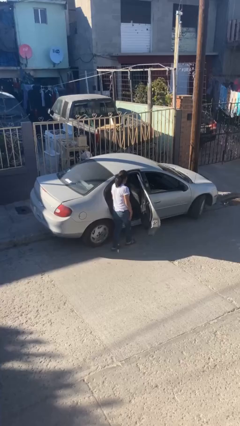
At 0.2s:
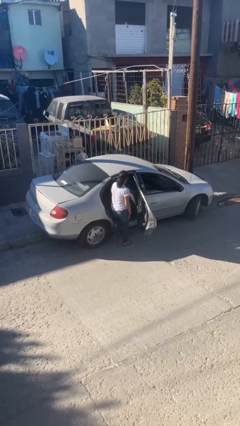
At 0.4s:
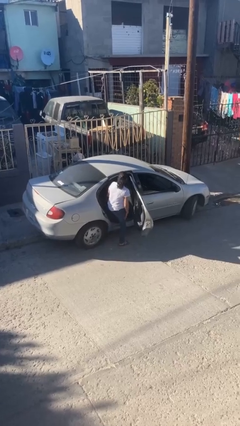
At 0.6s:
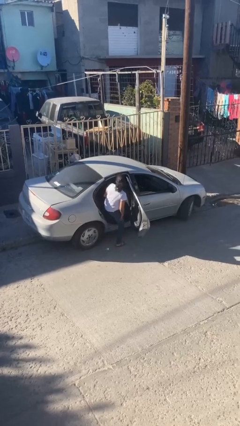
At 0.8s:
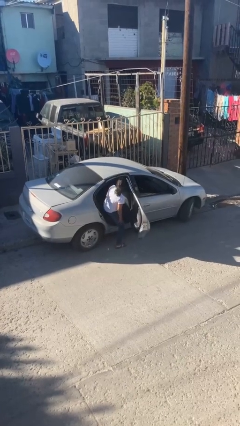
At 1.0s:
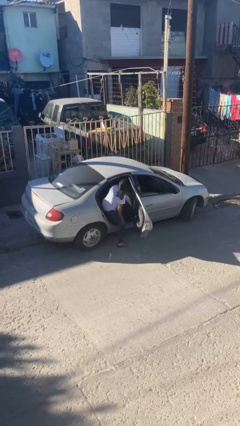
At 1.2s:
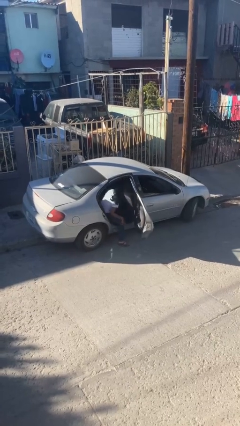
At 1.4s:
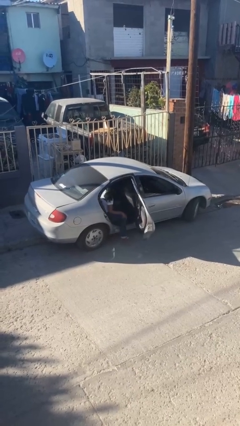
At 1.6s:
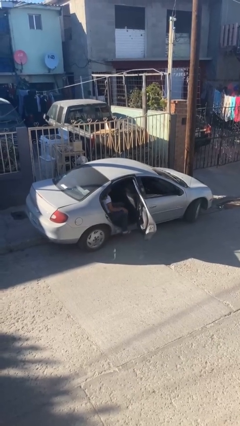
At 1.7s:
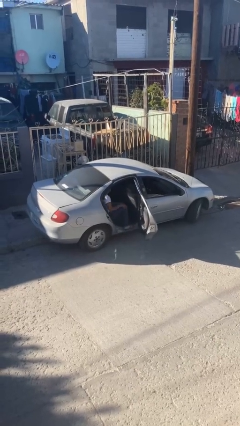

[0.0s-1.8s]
person enters car

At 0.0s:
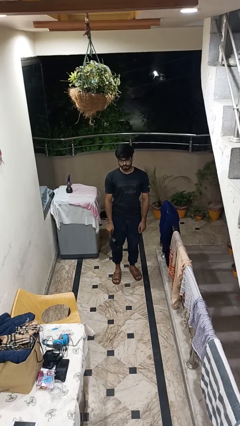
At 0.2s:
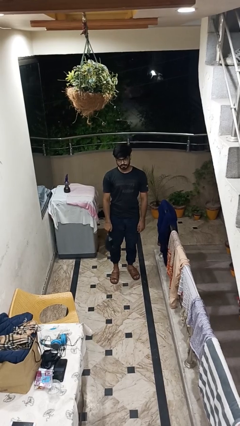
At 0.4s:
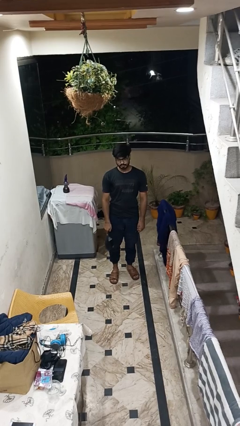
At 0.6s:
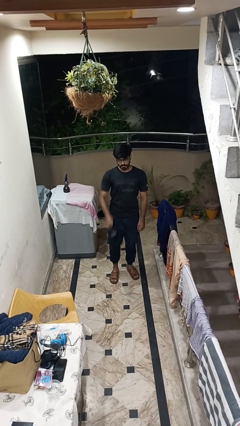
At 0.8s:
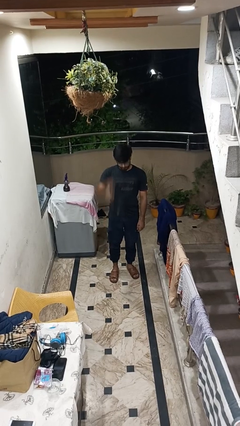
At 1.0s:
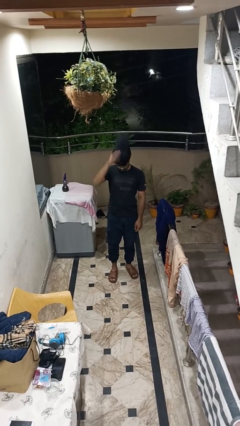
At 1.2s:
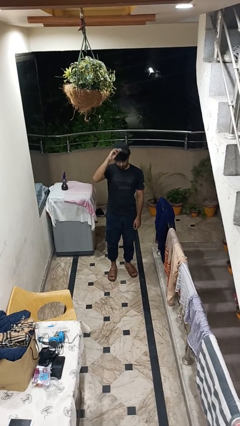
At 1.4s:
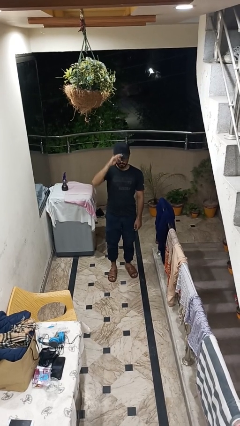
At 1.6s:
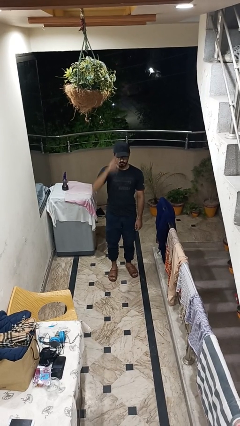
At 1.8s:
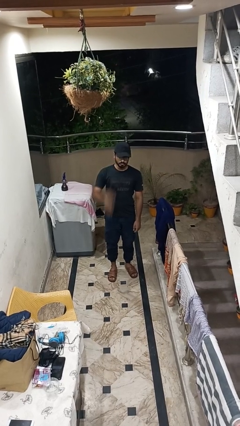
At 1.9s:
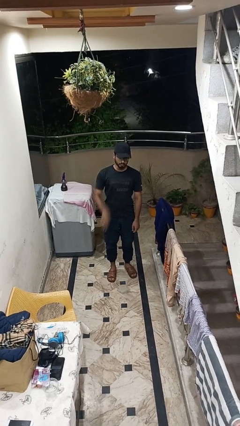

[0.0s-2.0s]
person puts on hat

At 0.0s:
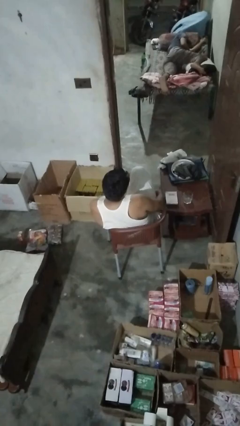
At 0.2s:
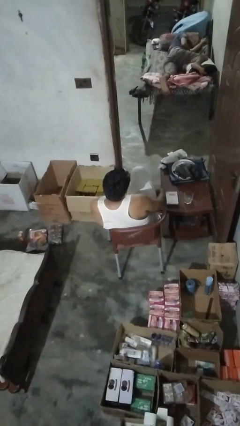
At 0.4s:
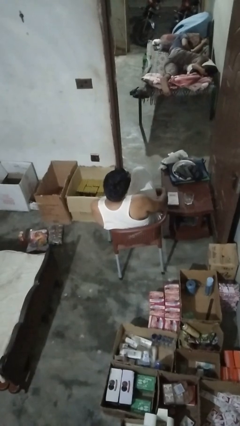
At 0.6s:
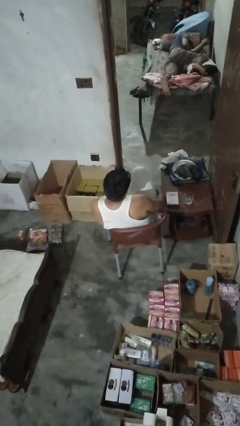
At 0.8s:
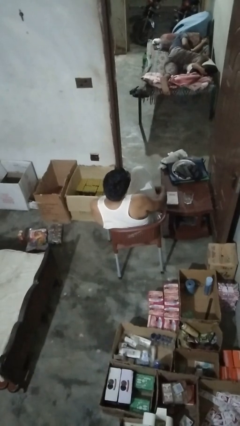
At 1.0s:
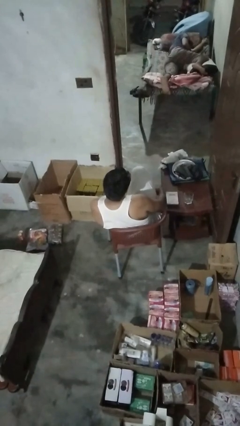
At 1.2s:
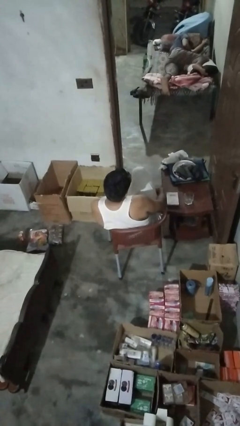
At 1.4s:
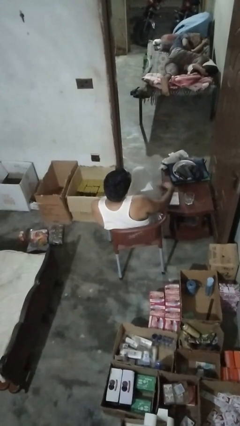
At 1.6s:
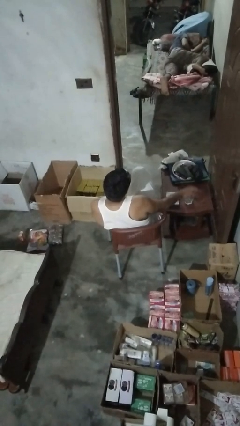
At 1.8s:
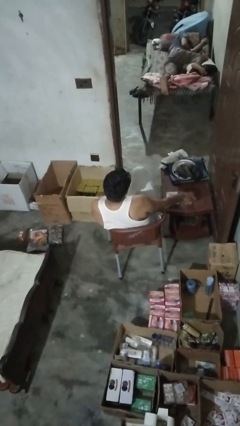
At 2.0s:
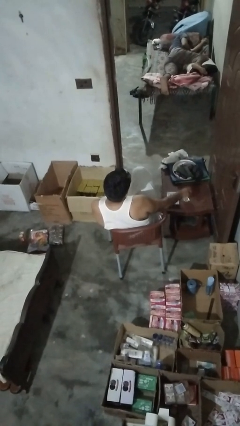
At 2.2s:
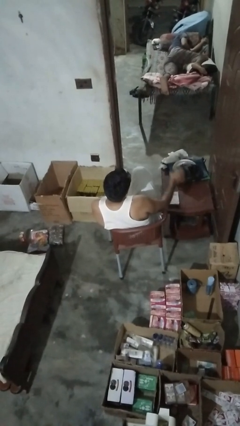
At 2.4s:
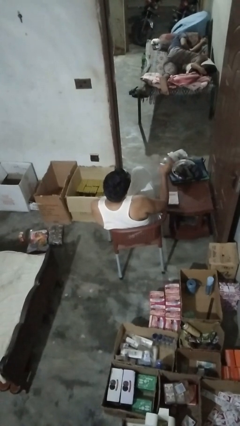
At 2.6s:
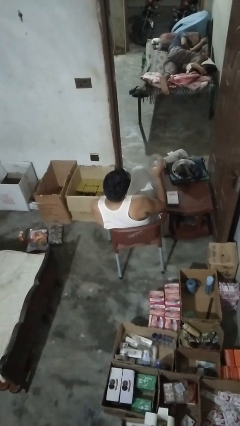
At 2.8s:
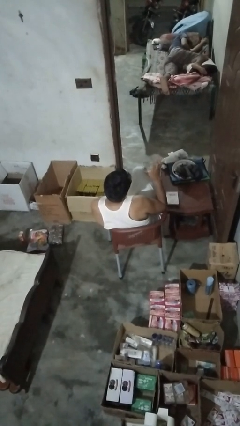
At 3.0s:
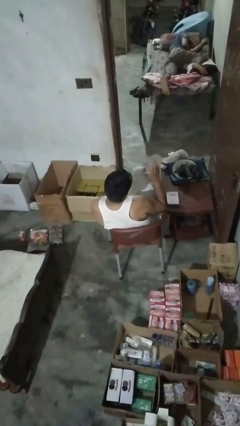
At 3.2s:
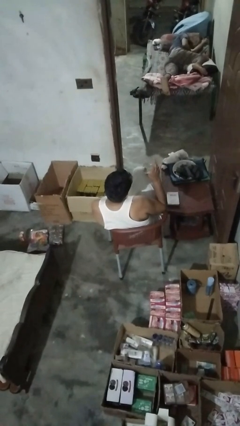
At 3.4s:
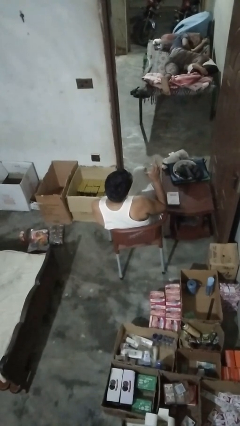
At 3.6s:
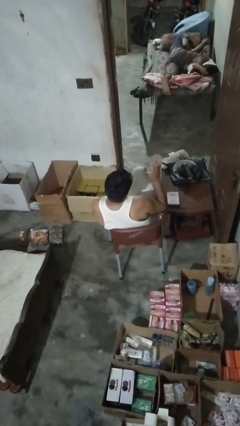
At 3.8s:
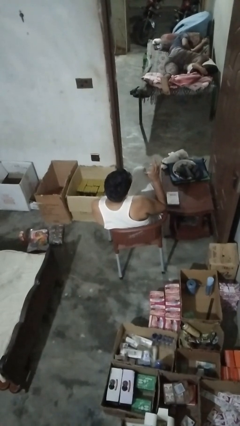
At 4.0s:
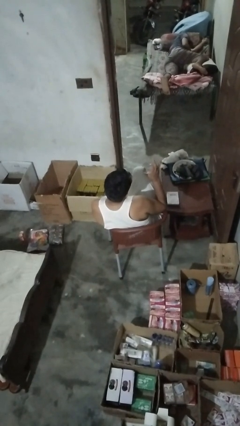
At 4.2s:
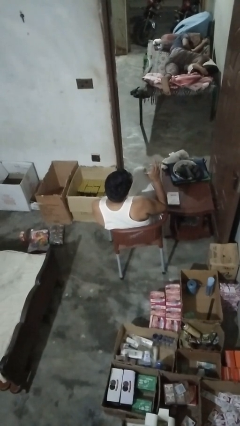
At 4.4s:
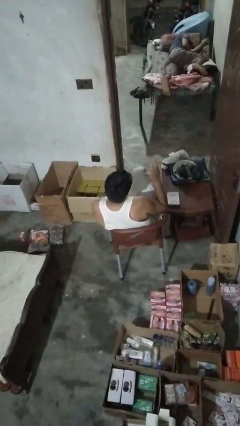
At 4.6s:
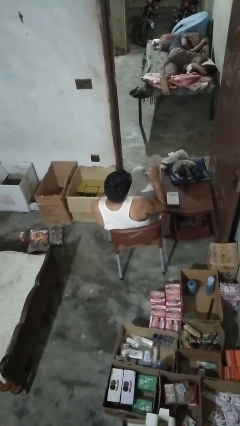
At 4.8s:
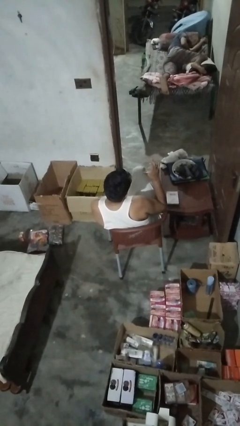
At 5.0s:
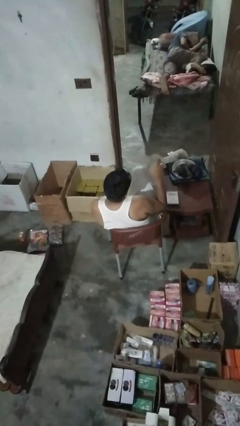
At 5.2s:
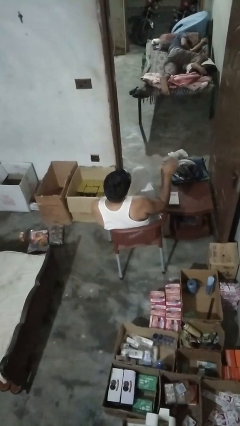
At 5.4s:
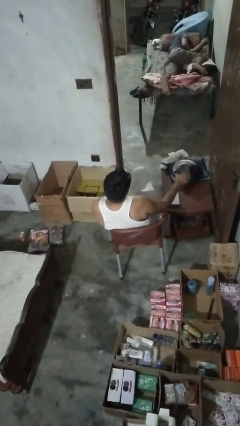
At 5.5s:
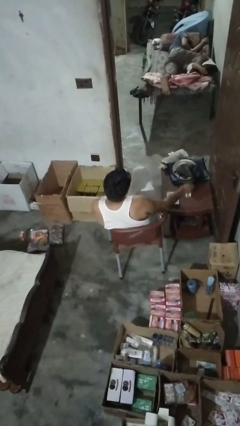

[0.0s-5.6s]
person knocks over glass

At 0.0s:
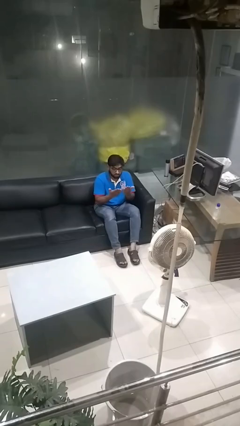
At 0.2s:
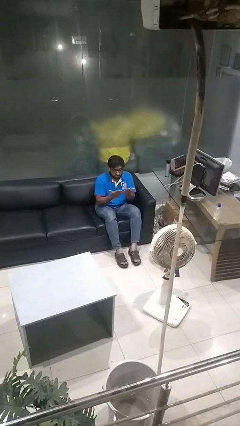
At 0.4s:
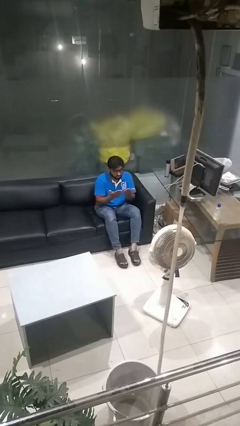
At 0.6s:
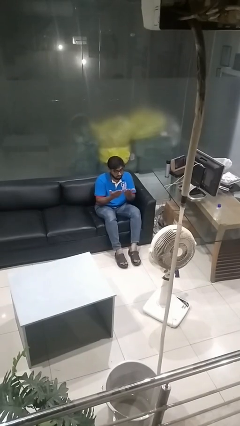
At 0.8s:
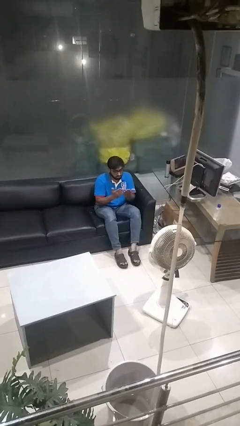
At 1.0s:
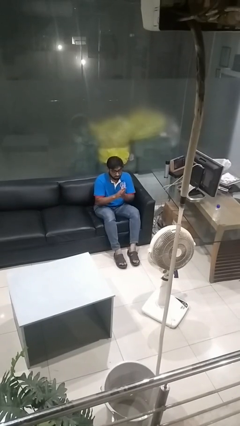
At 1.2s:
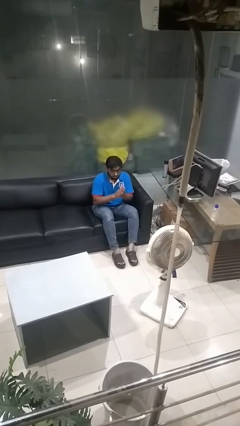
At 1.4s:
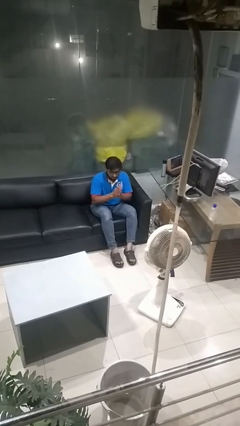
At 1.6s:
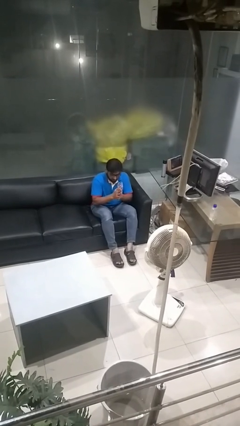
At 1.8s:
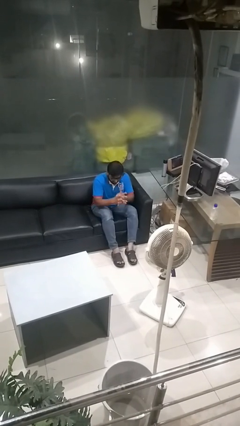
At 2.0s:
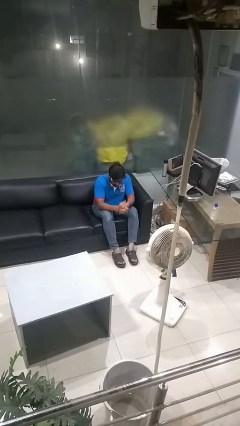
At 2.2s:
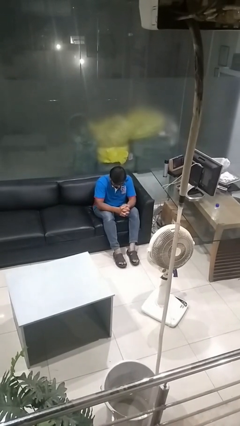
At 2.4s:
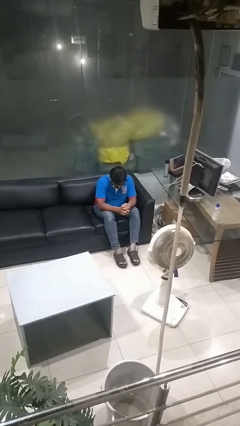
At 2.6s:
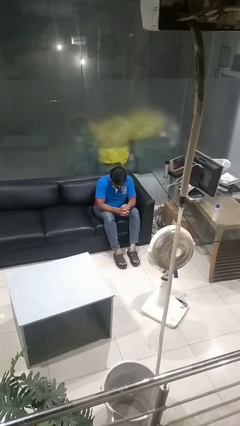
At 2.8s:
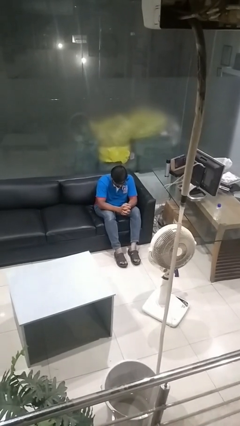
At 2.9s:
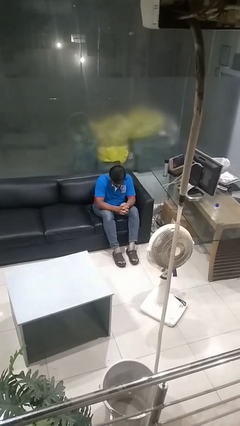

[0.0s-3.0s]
person looks at hands in lap

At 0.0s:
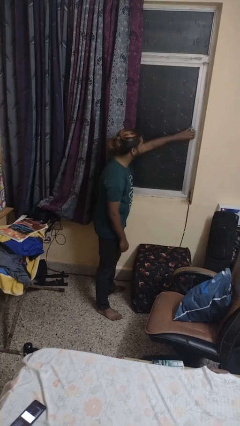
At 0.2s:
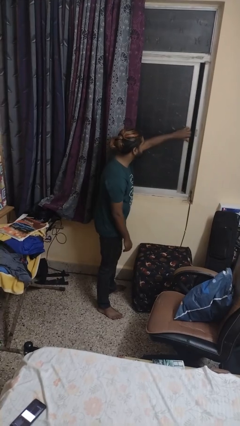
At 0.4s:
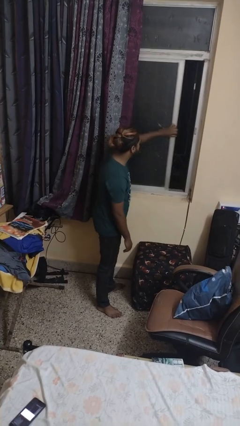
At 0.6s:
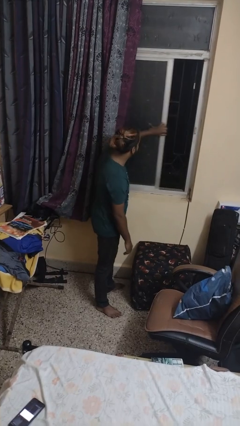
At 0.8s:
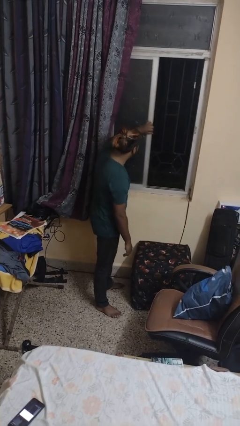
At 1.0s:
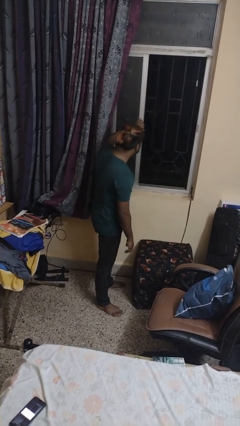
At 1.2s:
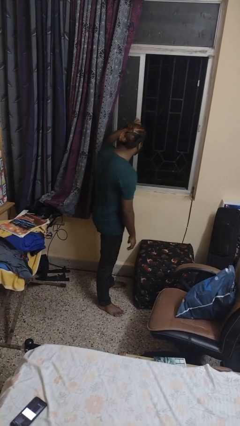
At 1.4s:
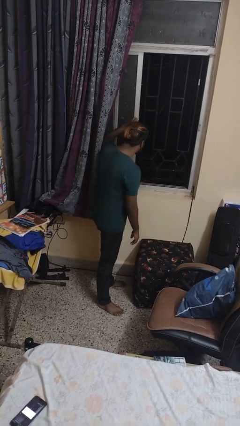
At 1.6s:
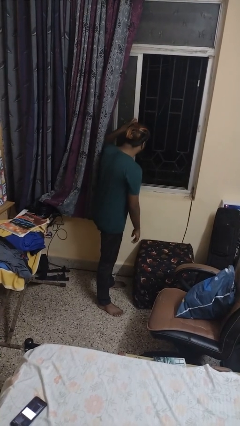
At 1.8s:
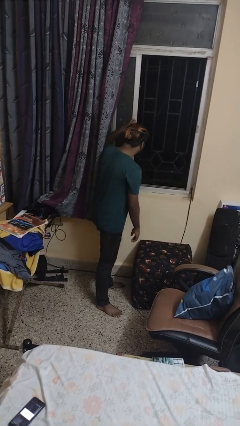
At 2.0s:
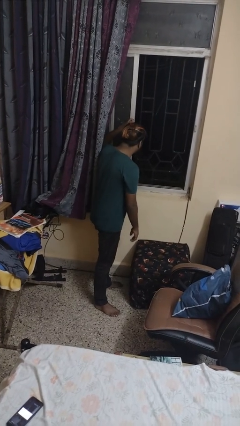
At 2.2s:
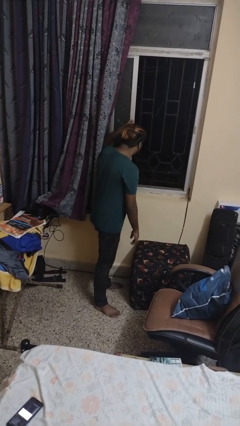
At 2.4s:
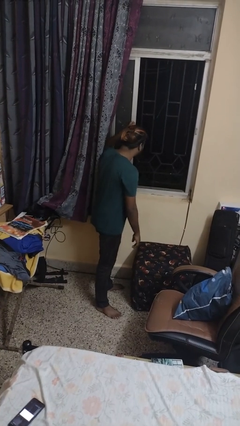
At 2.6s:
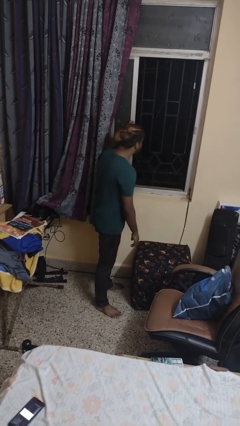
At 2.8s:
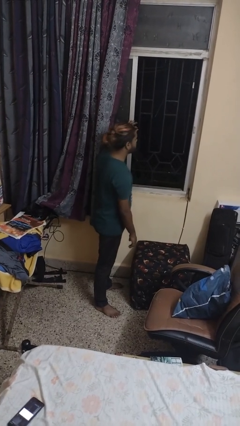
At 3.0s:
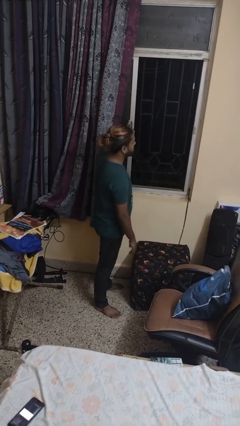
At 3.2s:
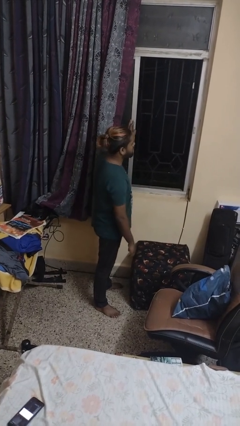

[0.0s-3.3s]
person opens sliding door

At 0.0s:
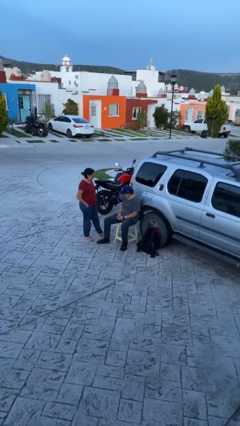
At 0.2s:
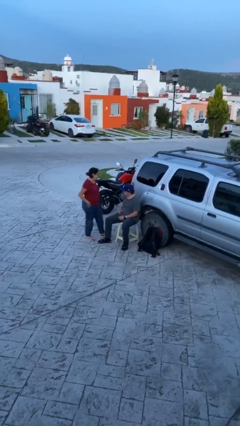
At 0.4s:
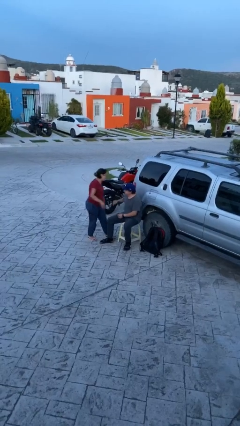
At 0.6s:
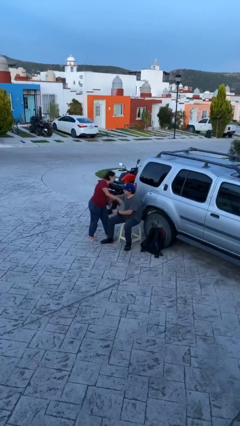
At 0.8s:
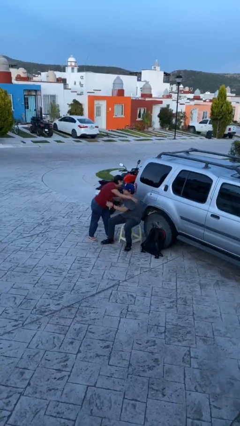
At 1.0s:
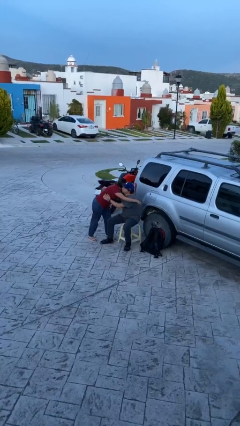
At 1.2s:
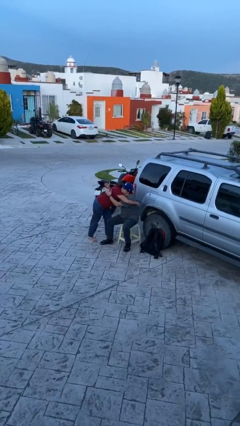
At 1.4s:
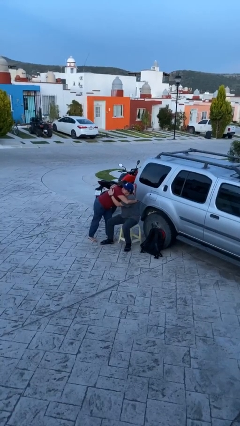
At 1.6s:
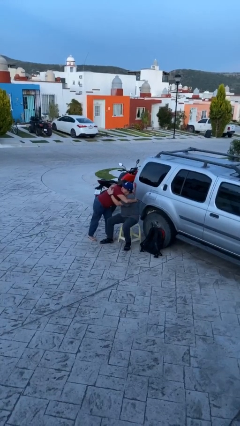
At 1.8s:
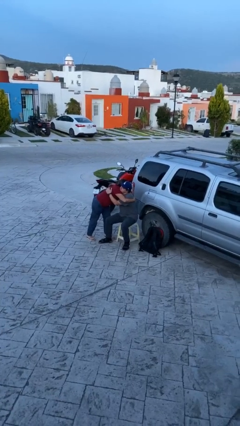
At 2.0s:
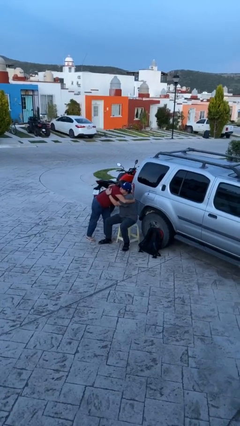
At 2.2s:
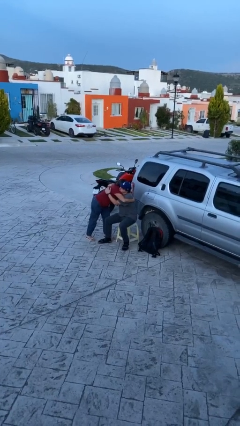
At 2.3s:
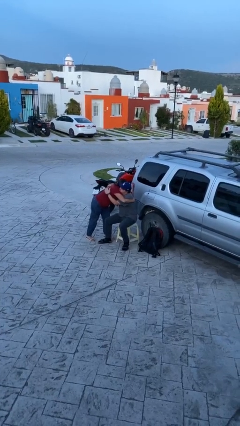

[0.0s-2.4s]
person embraces person
